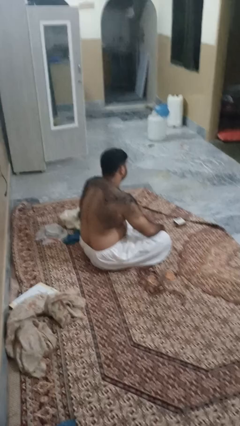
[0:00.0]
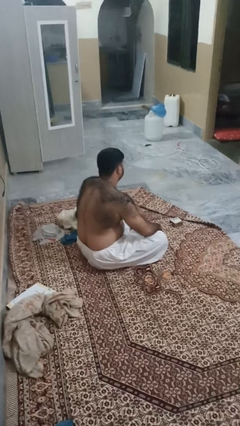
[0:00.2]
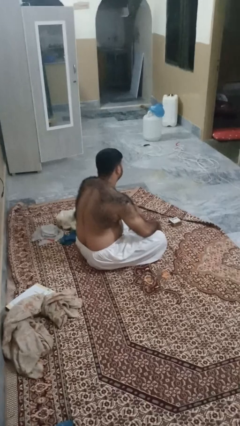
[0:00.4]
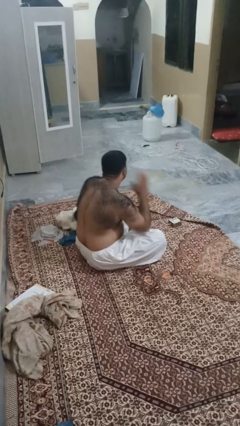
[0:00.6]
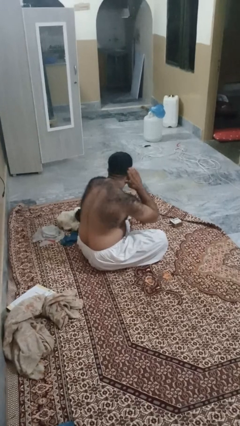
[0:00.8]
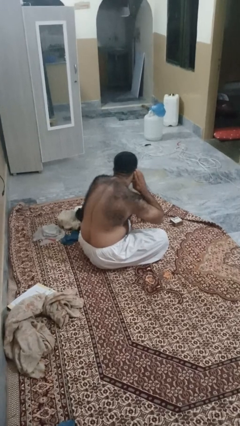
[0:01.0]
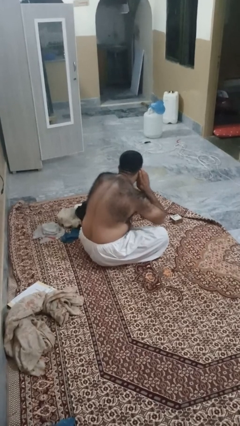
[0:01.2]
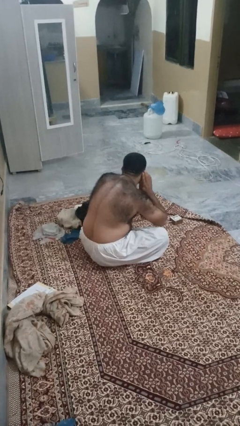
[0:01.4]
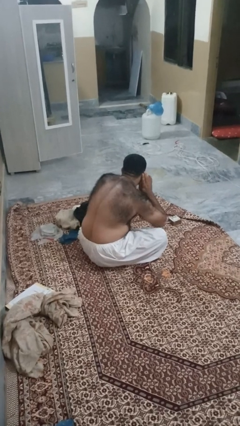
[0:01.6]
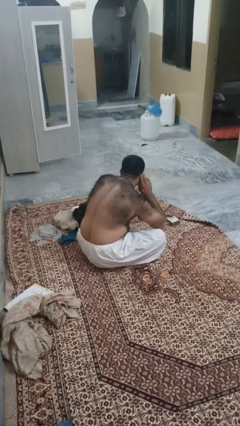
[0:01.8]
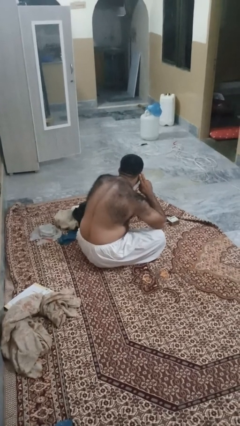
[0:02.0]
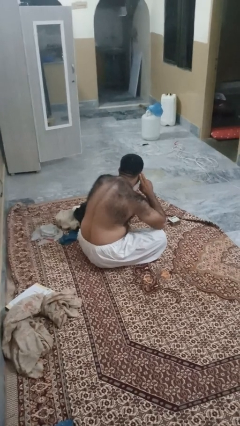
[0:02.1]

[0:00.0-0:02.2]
person gestures listen closely

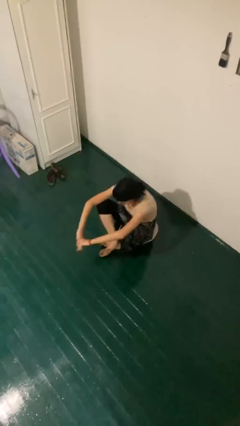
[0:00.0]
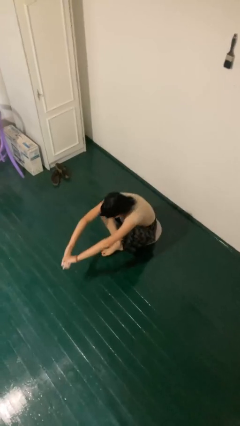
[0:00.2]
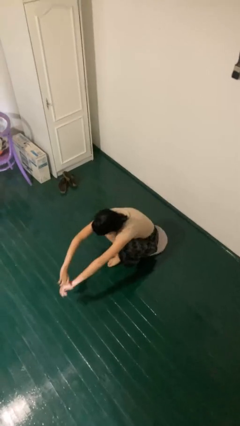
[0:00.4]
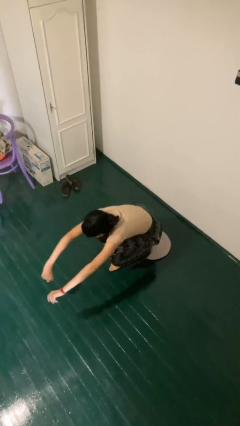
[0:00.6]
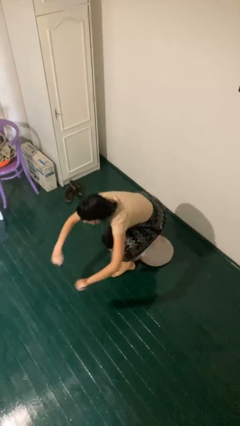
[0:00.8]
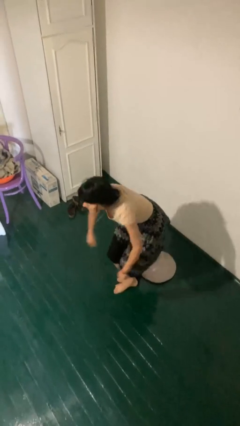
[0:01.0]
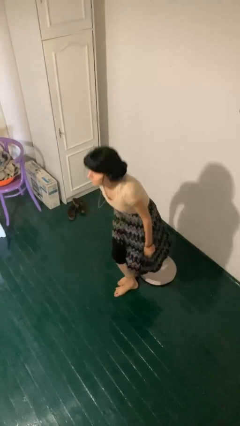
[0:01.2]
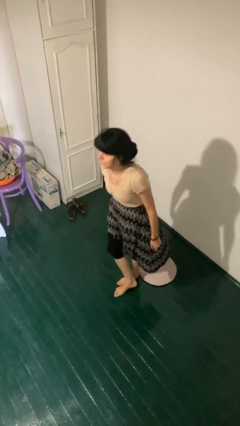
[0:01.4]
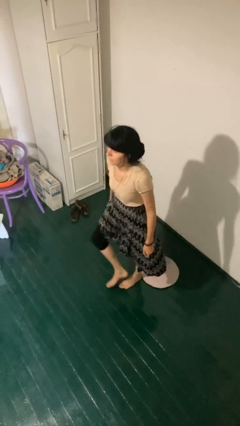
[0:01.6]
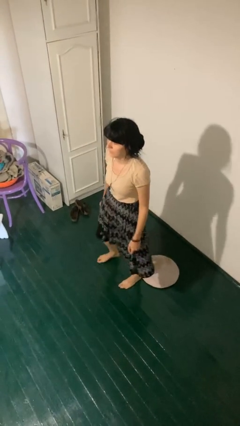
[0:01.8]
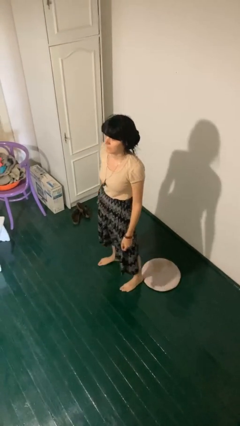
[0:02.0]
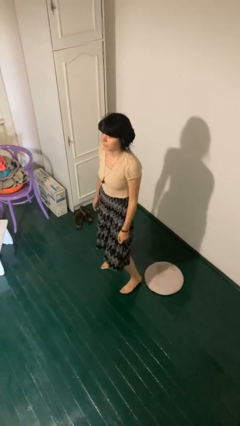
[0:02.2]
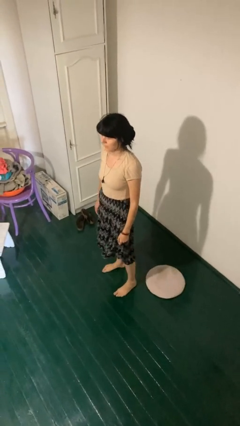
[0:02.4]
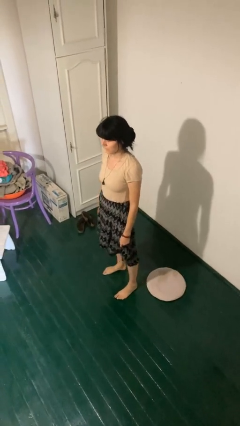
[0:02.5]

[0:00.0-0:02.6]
person stands up from floor

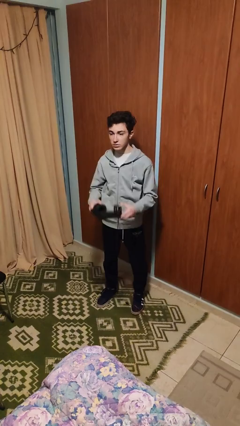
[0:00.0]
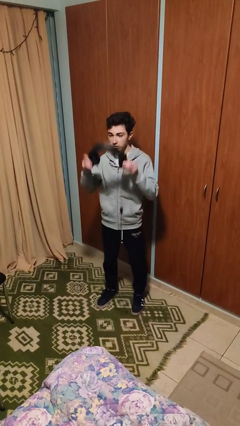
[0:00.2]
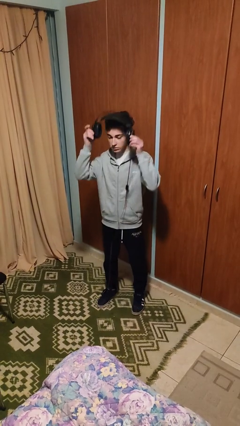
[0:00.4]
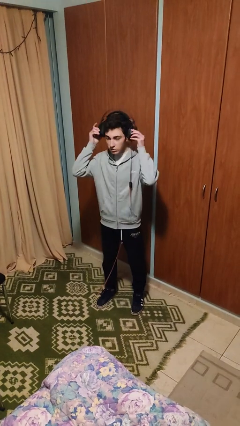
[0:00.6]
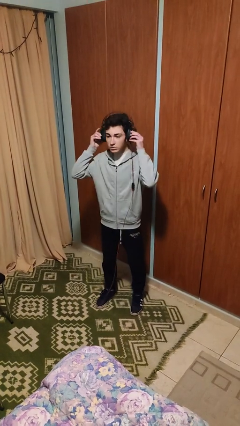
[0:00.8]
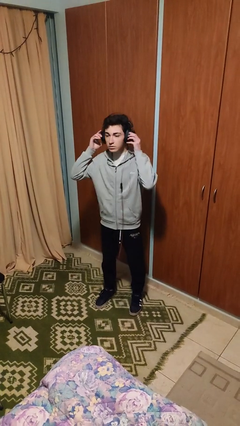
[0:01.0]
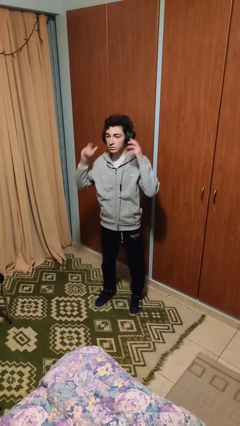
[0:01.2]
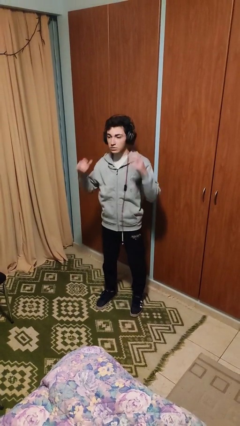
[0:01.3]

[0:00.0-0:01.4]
person puts on headphones

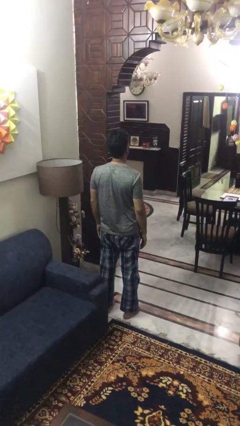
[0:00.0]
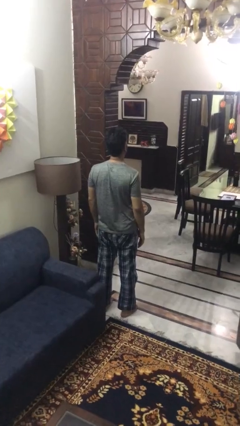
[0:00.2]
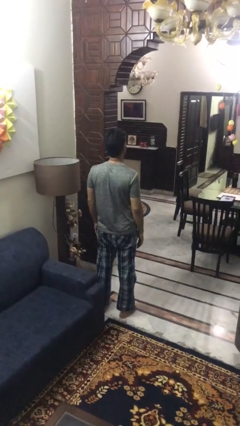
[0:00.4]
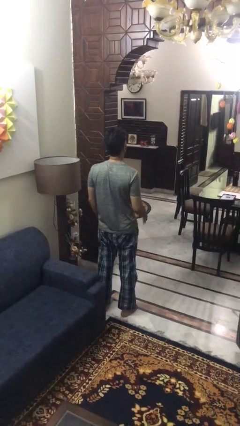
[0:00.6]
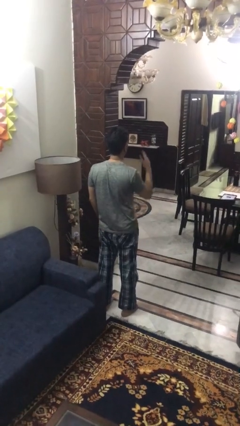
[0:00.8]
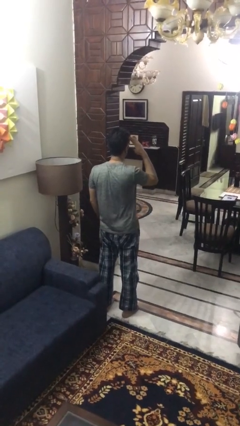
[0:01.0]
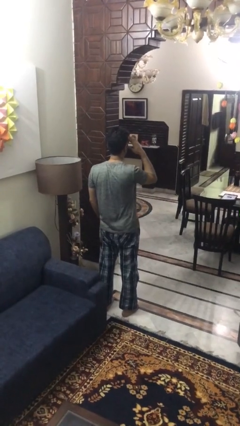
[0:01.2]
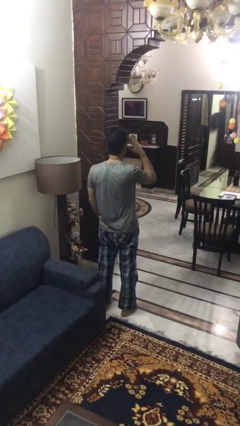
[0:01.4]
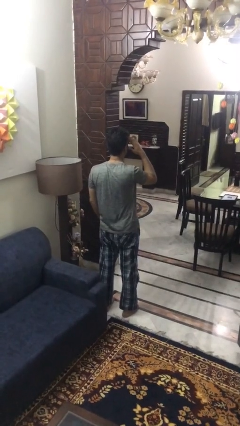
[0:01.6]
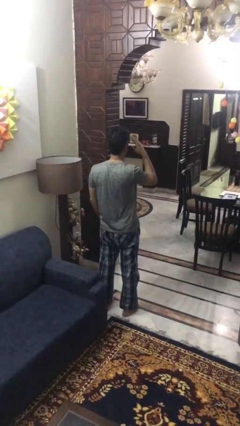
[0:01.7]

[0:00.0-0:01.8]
person salutes

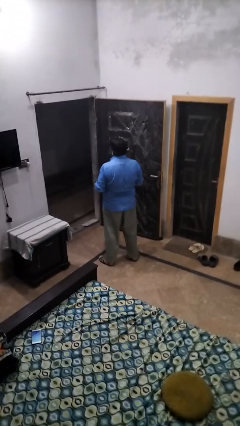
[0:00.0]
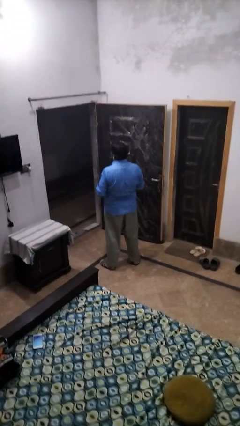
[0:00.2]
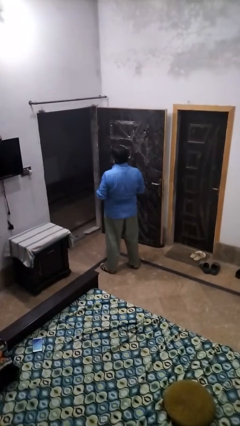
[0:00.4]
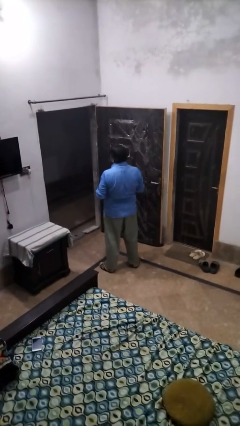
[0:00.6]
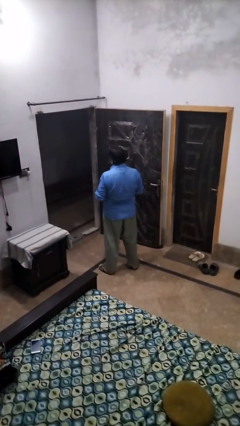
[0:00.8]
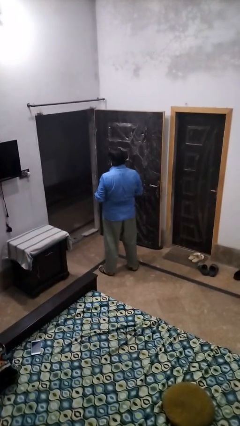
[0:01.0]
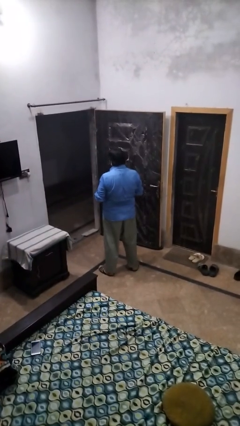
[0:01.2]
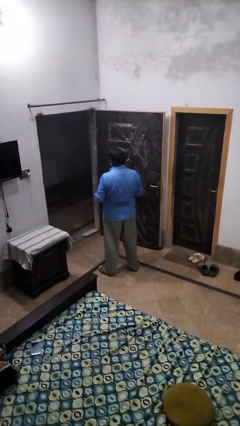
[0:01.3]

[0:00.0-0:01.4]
person picks up object from floor

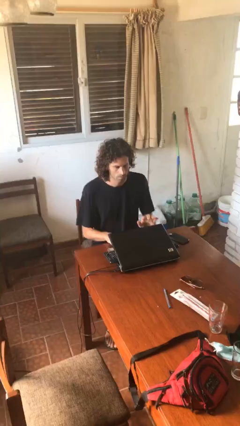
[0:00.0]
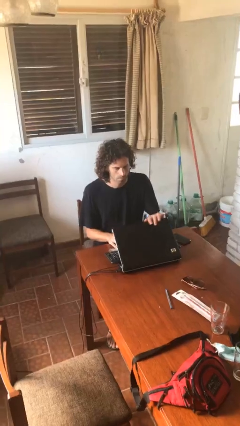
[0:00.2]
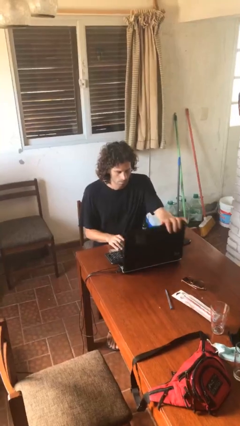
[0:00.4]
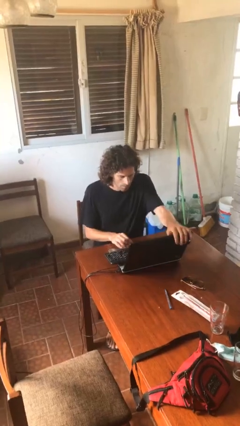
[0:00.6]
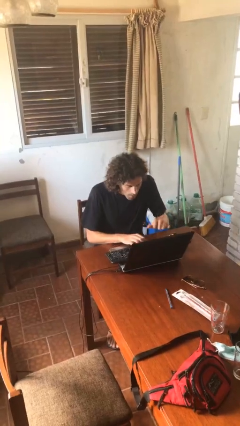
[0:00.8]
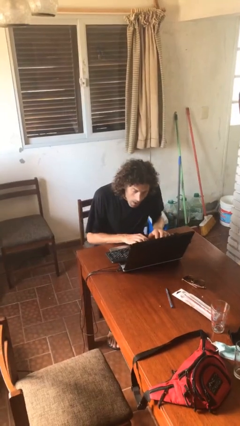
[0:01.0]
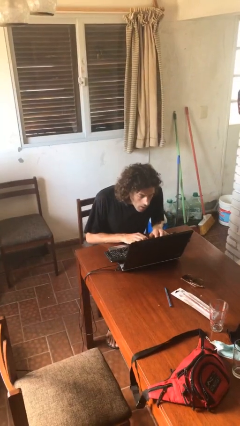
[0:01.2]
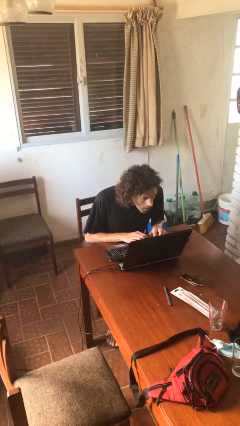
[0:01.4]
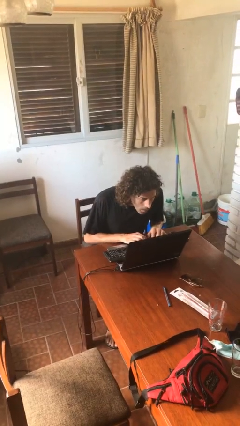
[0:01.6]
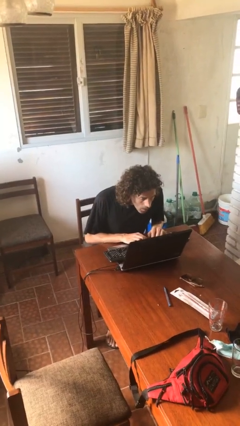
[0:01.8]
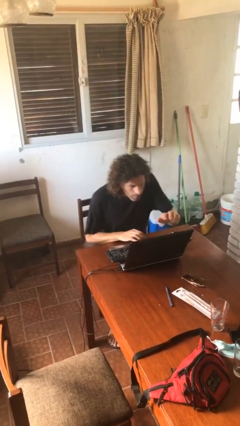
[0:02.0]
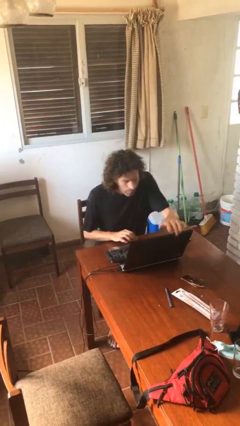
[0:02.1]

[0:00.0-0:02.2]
person interacts with laptop

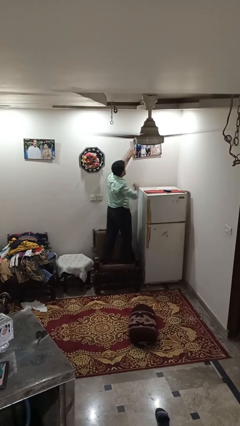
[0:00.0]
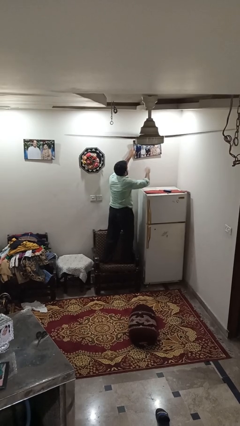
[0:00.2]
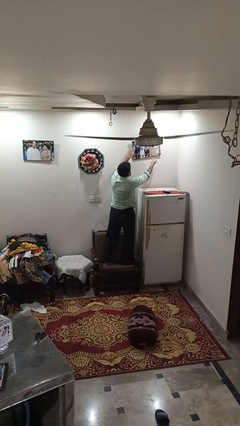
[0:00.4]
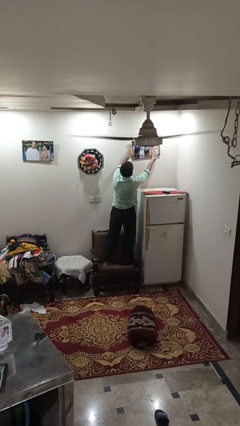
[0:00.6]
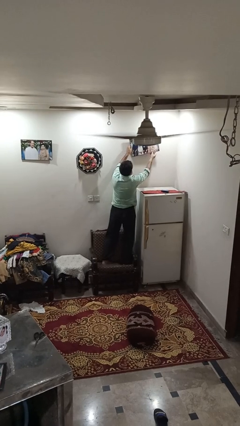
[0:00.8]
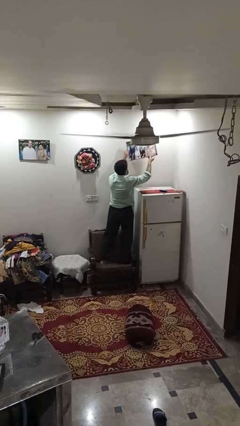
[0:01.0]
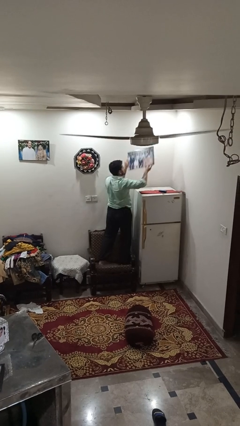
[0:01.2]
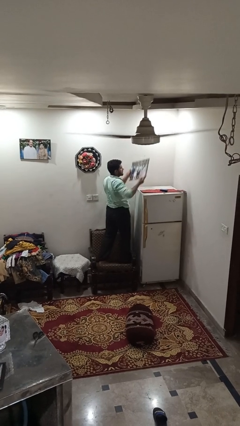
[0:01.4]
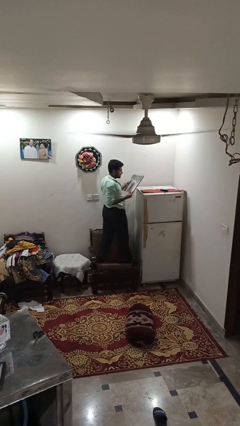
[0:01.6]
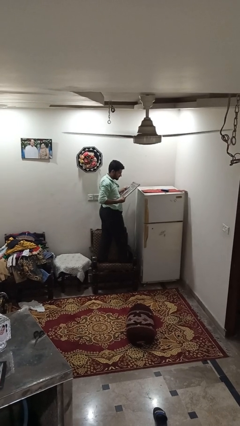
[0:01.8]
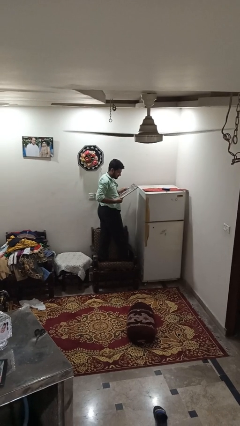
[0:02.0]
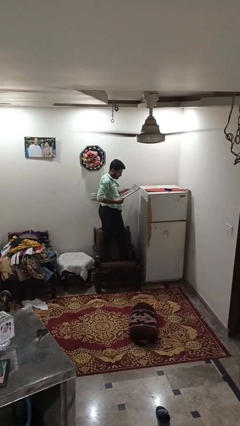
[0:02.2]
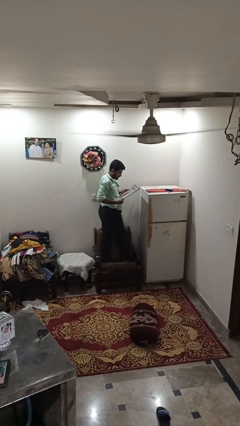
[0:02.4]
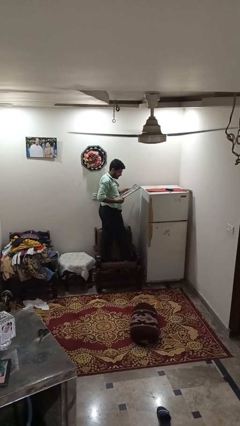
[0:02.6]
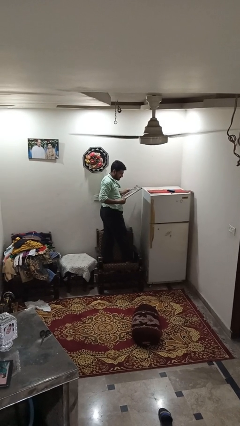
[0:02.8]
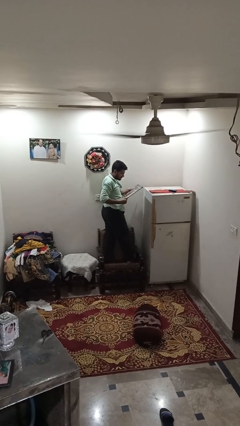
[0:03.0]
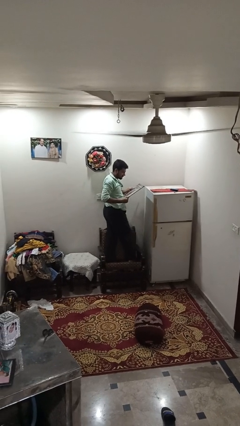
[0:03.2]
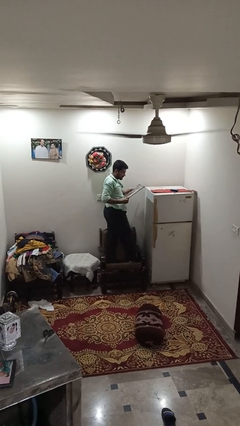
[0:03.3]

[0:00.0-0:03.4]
person takes down picture frame

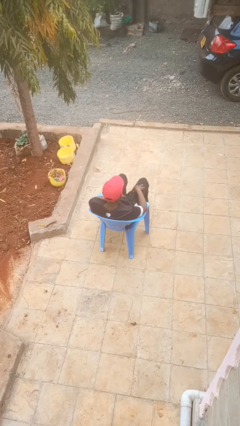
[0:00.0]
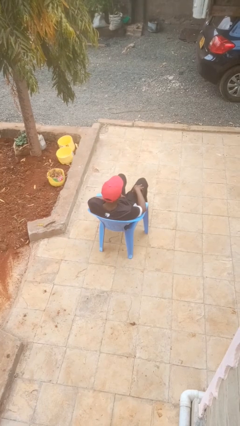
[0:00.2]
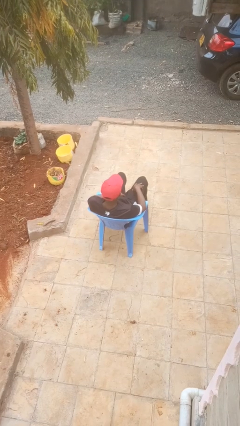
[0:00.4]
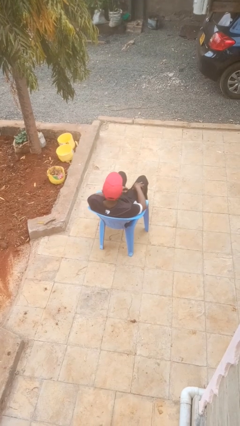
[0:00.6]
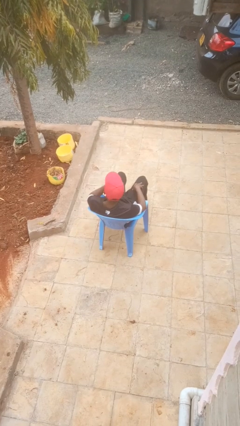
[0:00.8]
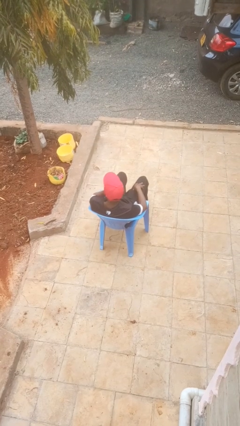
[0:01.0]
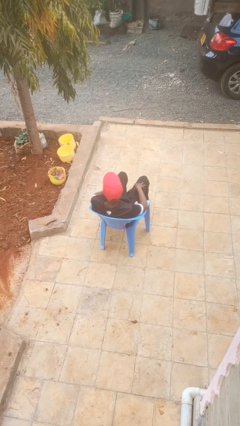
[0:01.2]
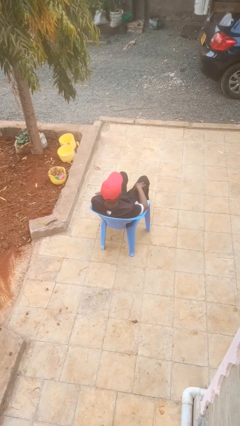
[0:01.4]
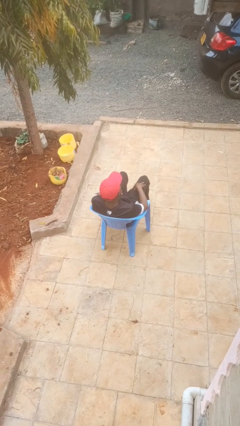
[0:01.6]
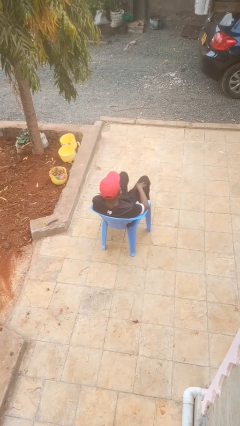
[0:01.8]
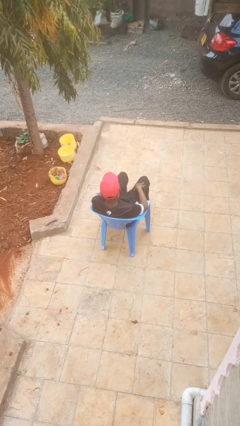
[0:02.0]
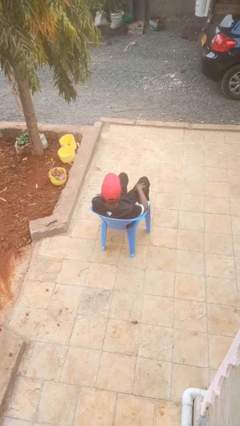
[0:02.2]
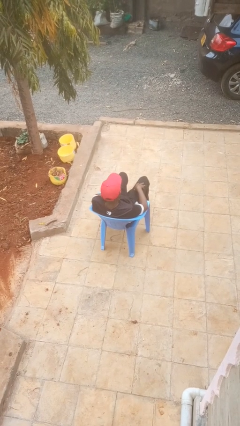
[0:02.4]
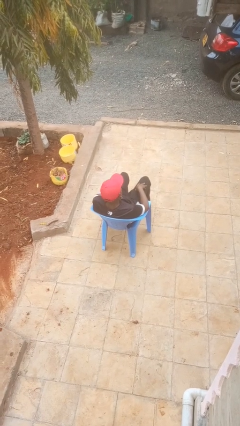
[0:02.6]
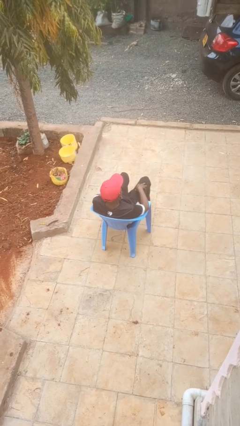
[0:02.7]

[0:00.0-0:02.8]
person strokes chin
